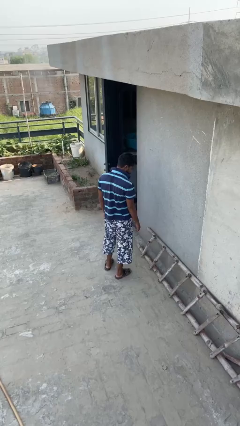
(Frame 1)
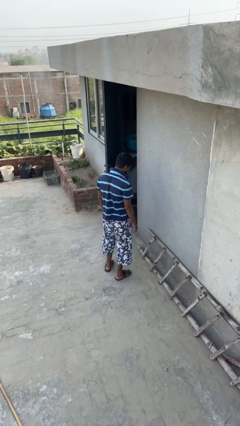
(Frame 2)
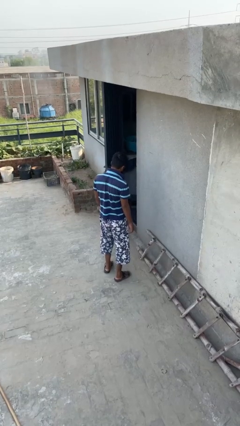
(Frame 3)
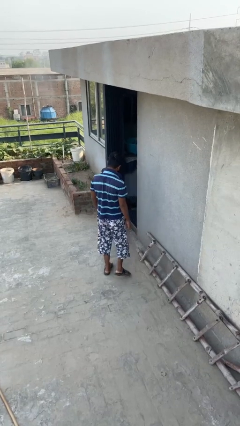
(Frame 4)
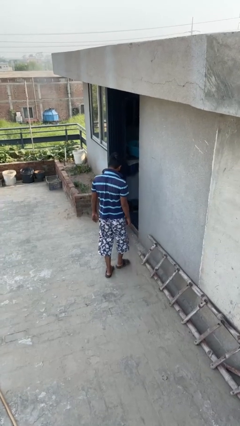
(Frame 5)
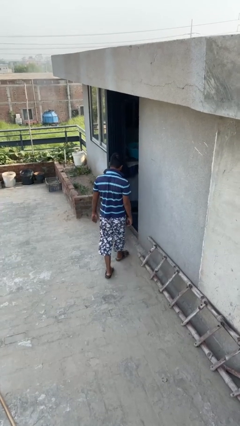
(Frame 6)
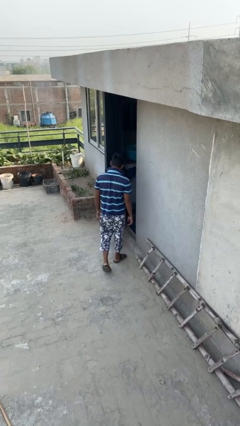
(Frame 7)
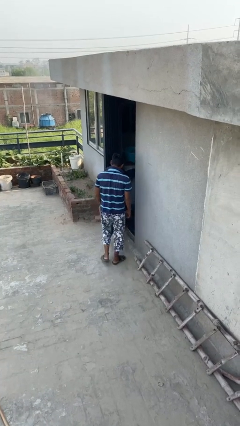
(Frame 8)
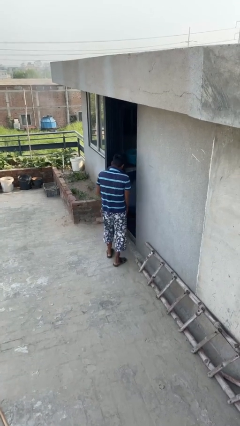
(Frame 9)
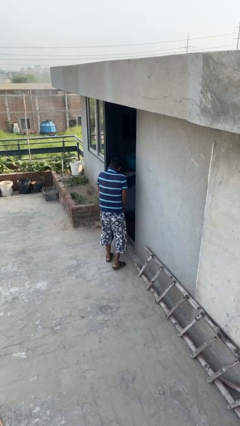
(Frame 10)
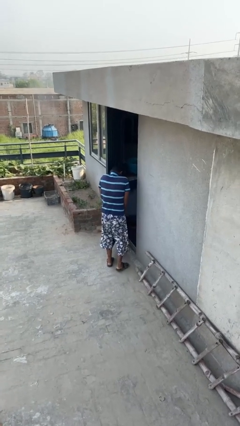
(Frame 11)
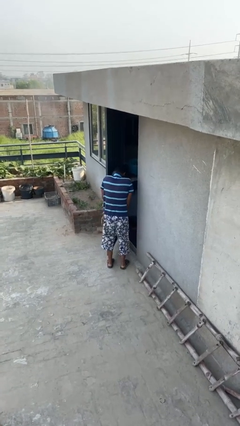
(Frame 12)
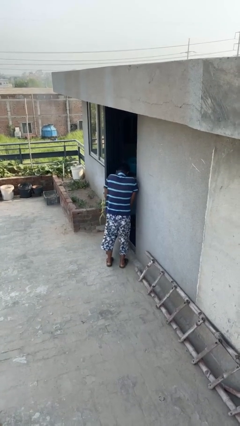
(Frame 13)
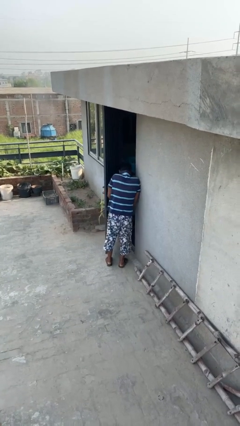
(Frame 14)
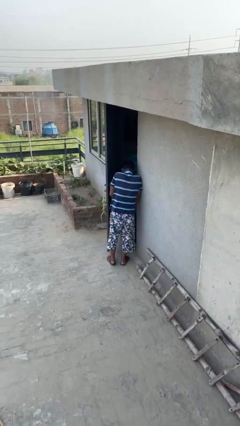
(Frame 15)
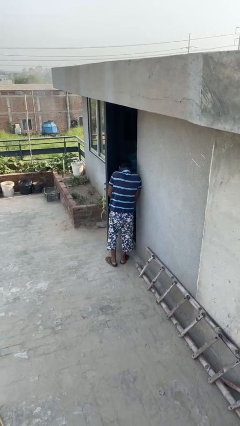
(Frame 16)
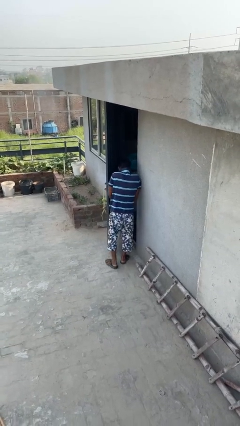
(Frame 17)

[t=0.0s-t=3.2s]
person bumps into wall

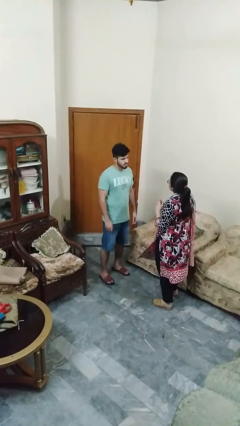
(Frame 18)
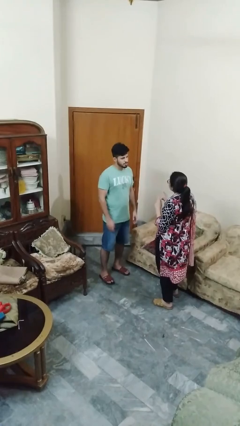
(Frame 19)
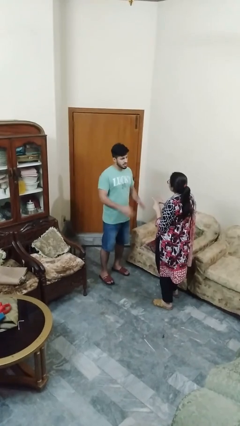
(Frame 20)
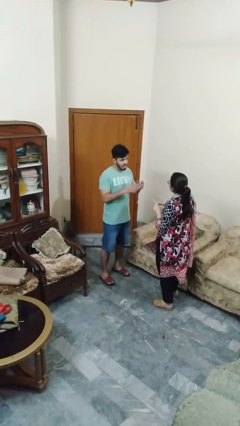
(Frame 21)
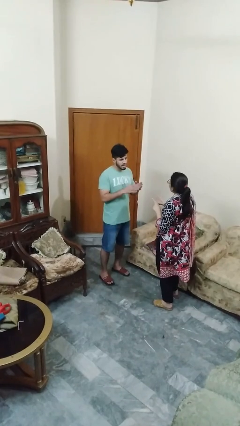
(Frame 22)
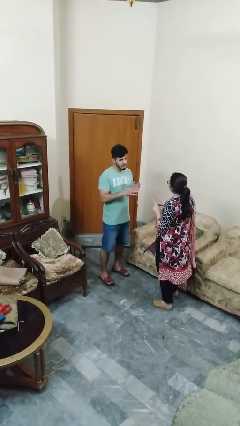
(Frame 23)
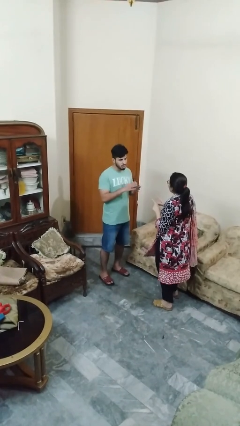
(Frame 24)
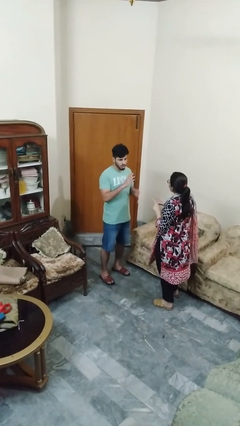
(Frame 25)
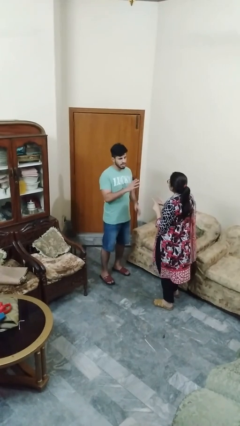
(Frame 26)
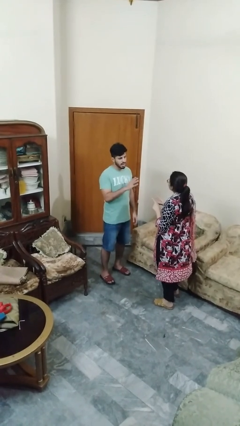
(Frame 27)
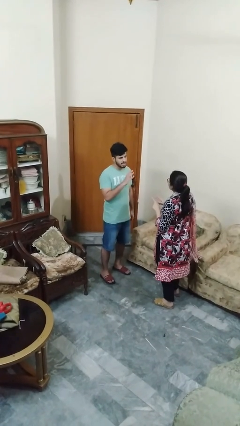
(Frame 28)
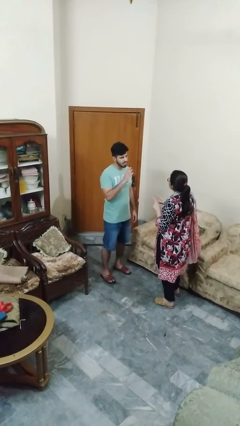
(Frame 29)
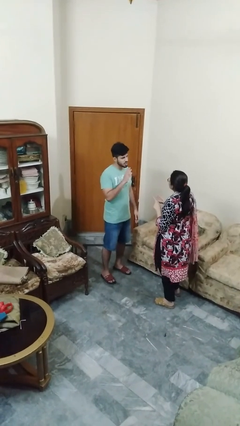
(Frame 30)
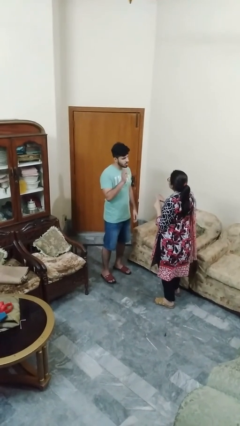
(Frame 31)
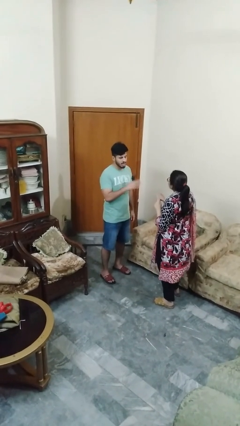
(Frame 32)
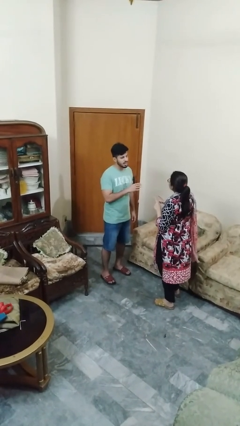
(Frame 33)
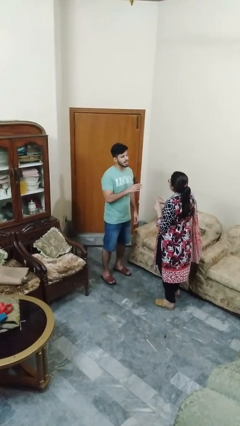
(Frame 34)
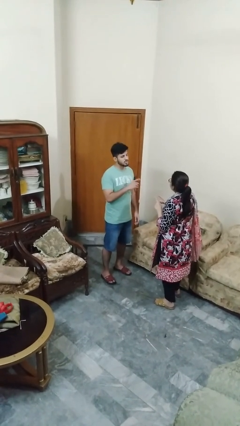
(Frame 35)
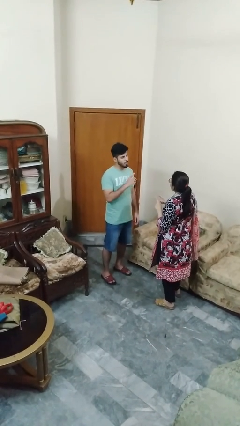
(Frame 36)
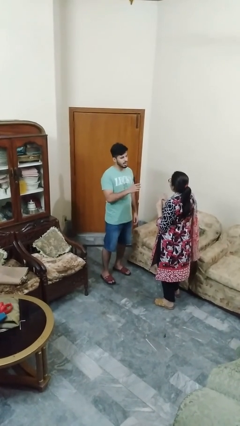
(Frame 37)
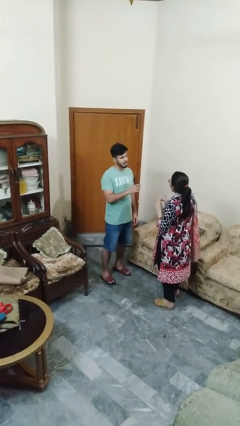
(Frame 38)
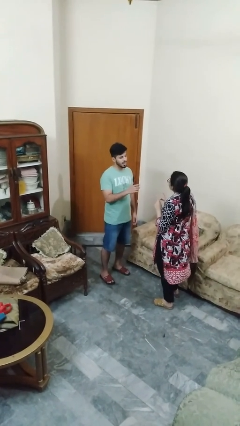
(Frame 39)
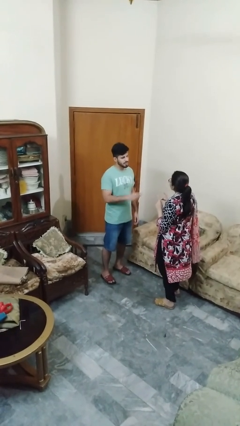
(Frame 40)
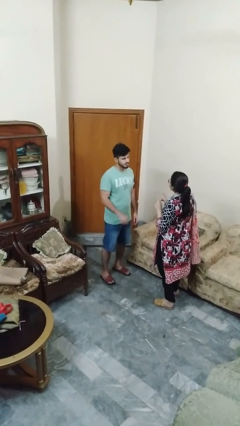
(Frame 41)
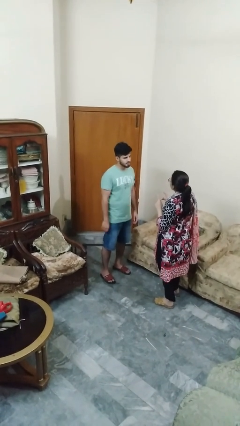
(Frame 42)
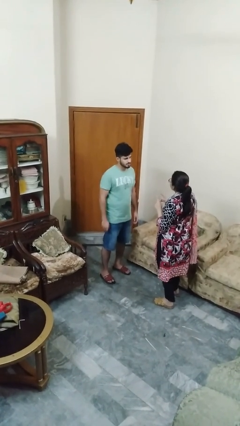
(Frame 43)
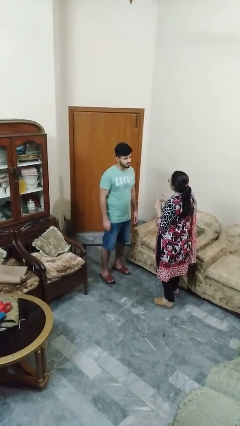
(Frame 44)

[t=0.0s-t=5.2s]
person talks to person

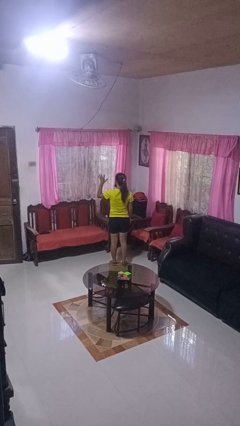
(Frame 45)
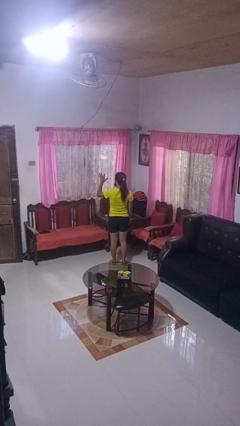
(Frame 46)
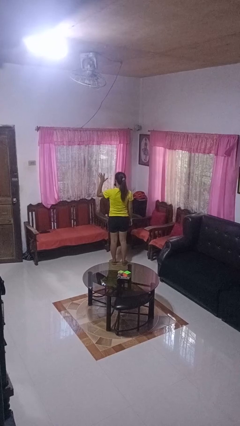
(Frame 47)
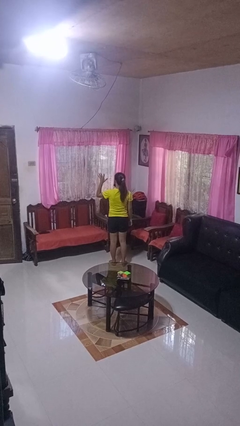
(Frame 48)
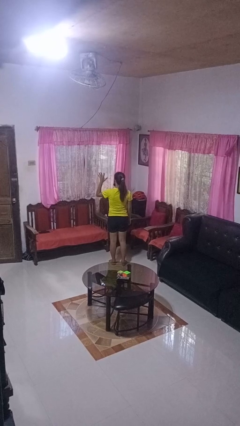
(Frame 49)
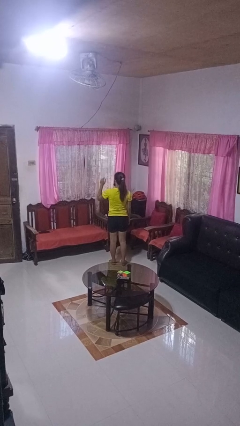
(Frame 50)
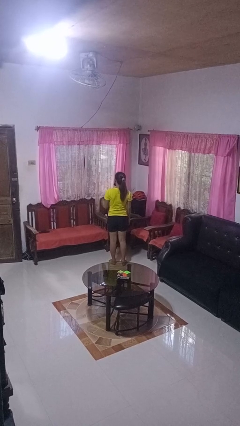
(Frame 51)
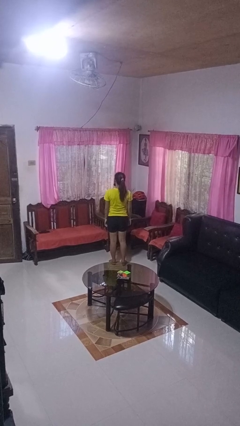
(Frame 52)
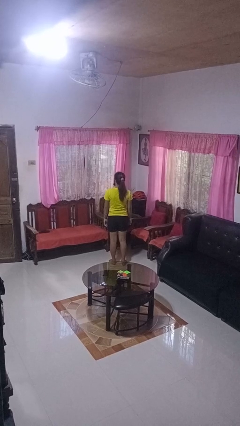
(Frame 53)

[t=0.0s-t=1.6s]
person gestures number five

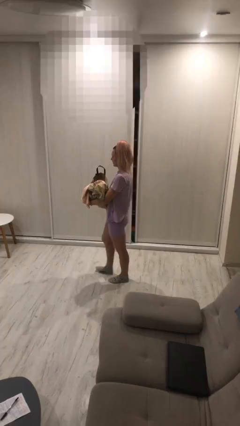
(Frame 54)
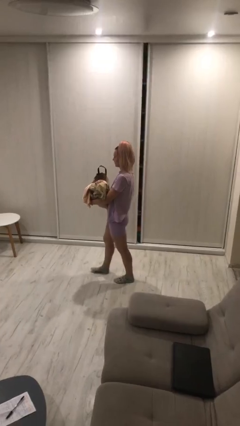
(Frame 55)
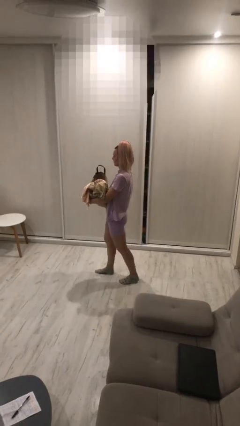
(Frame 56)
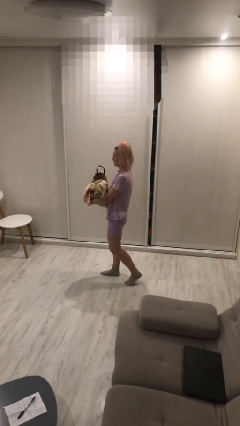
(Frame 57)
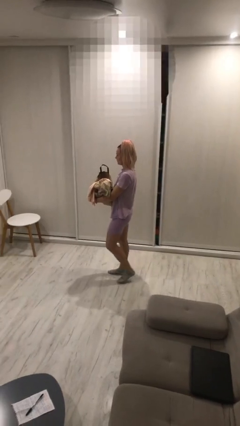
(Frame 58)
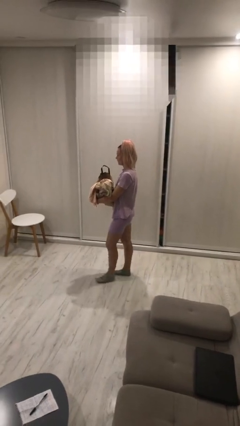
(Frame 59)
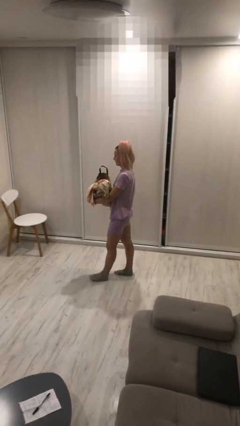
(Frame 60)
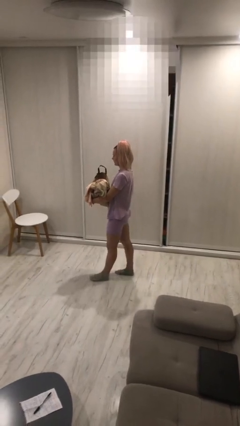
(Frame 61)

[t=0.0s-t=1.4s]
person carries laundry basket

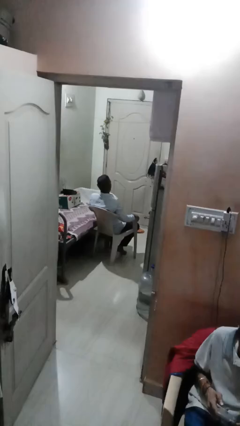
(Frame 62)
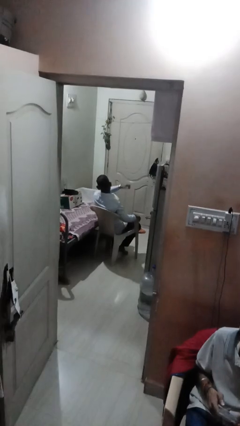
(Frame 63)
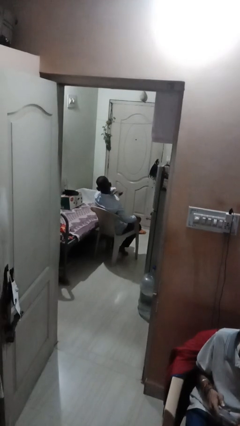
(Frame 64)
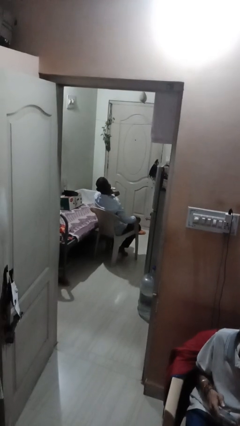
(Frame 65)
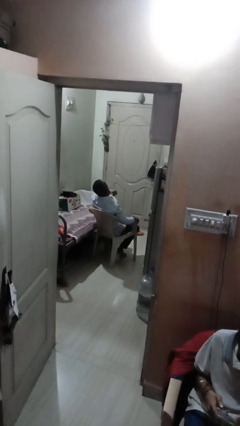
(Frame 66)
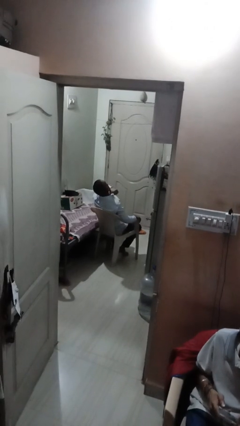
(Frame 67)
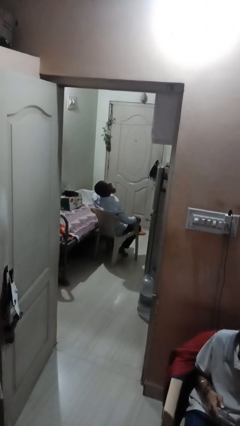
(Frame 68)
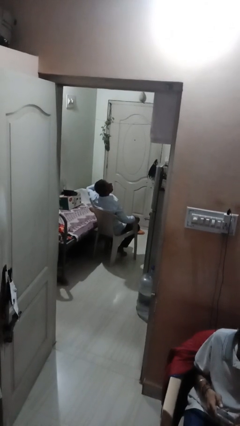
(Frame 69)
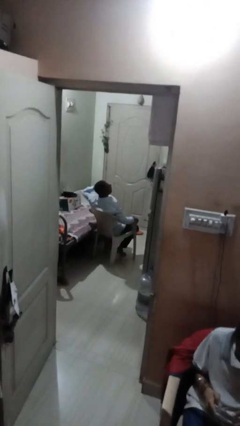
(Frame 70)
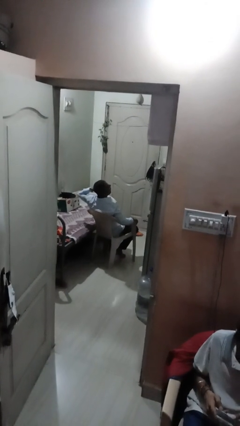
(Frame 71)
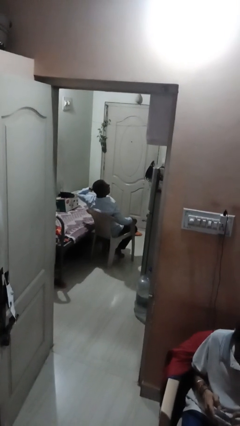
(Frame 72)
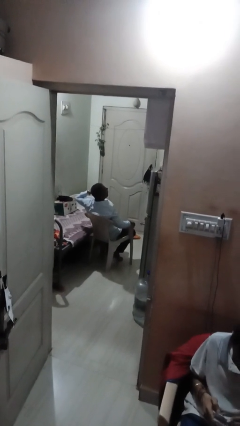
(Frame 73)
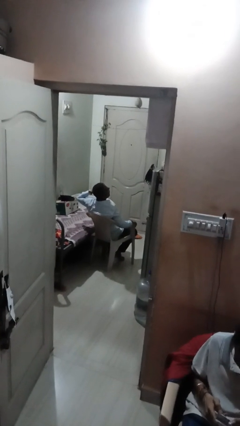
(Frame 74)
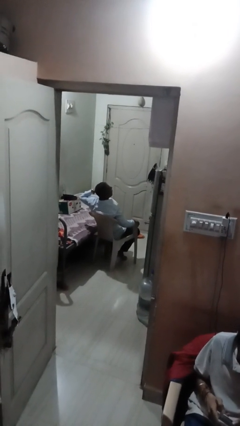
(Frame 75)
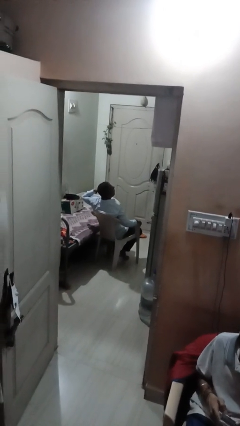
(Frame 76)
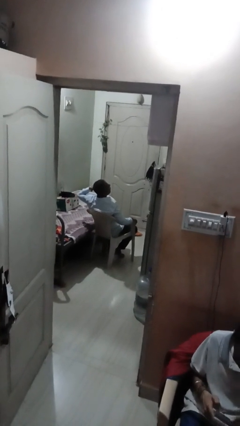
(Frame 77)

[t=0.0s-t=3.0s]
person gestures cut

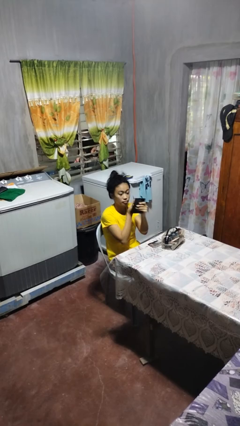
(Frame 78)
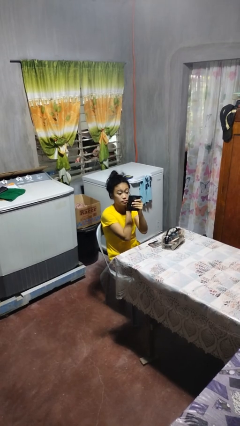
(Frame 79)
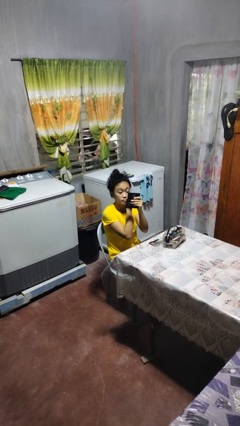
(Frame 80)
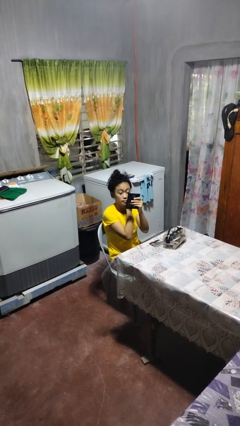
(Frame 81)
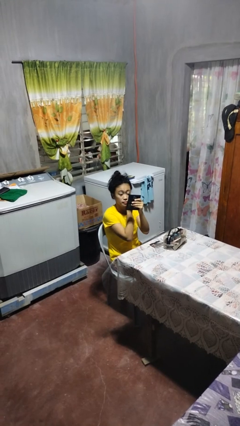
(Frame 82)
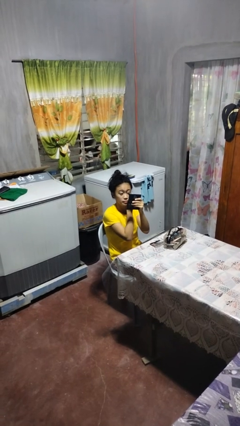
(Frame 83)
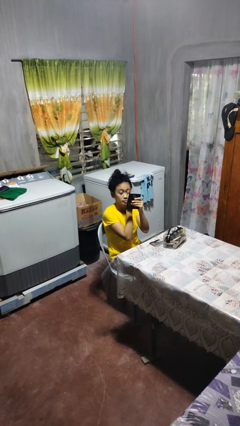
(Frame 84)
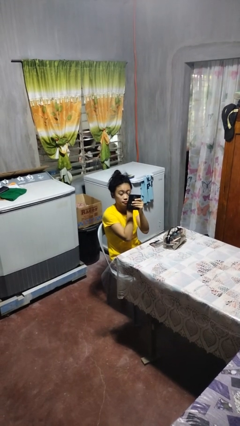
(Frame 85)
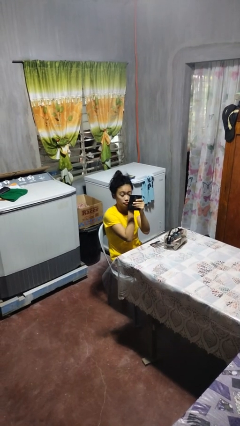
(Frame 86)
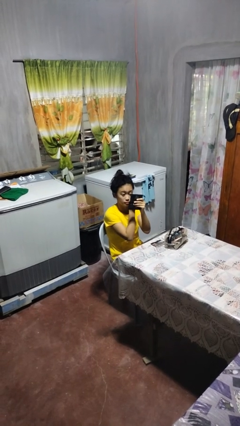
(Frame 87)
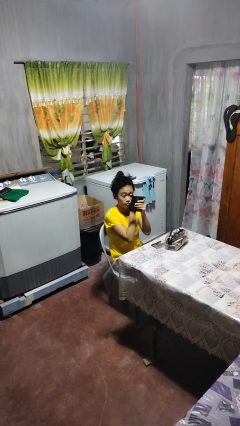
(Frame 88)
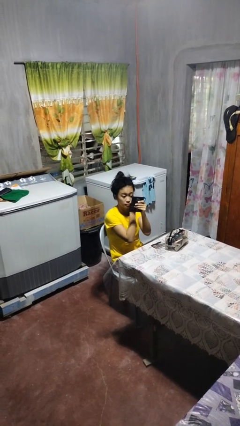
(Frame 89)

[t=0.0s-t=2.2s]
person applies eye makeup

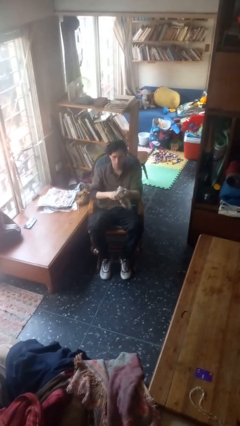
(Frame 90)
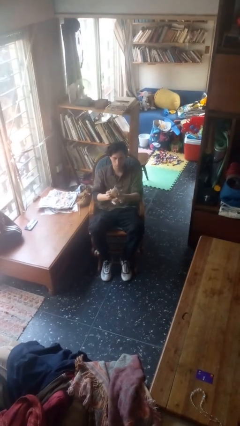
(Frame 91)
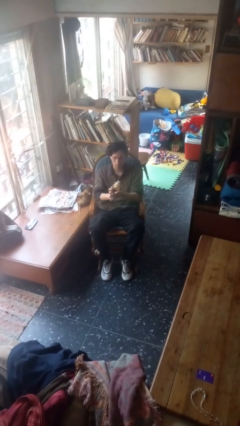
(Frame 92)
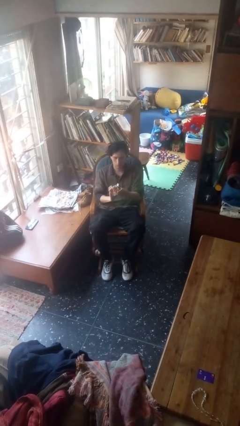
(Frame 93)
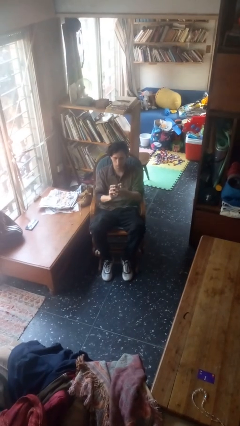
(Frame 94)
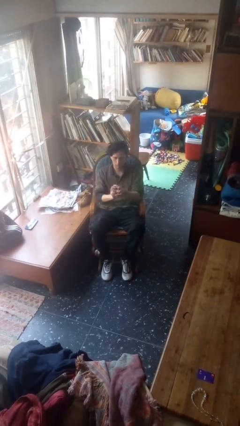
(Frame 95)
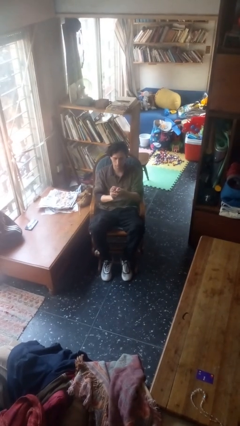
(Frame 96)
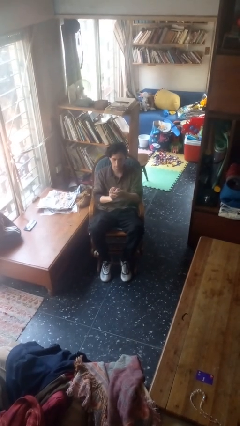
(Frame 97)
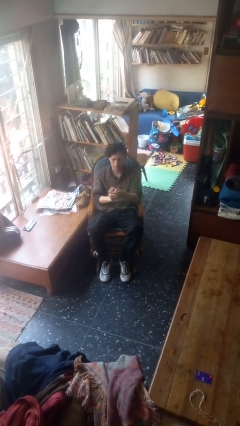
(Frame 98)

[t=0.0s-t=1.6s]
person crumples paper
